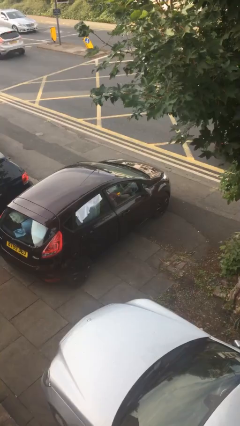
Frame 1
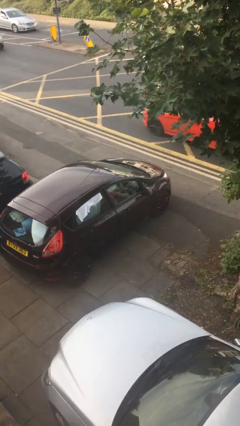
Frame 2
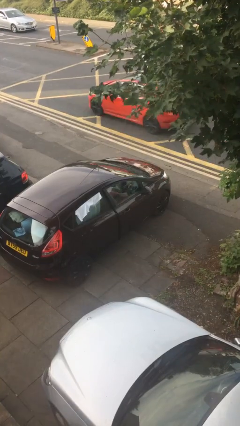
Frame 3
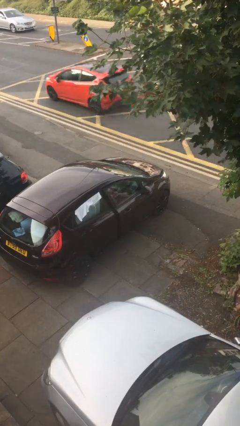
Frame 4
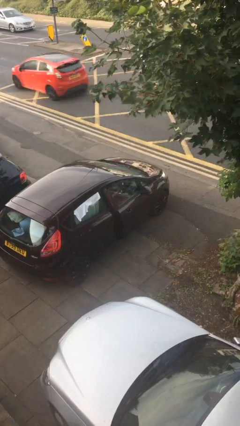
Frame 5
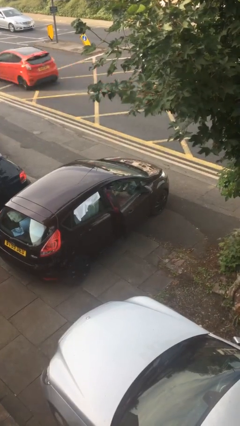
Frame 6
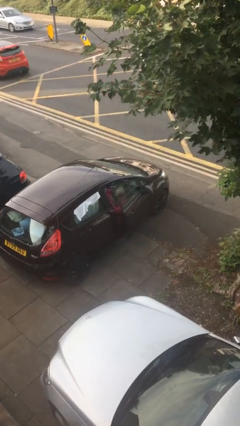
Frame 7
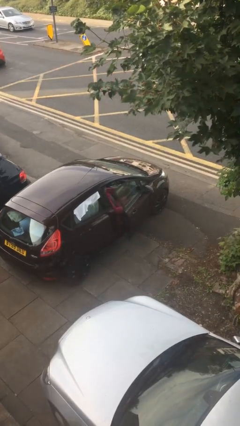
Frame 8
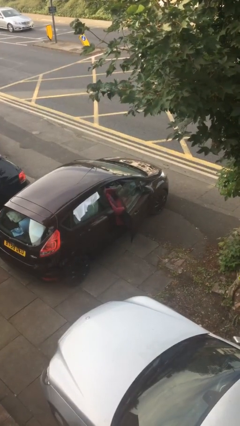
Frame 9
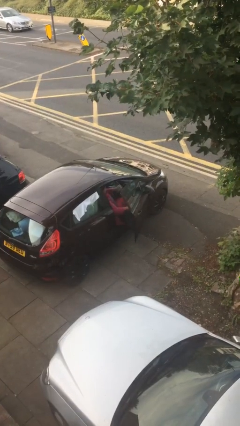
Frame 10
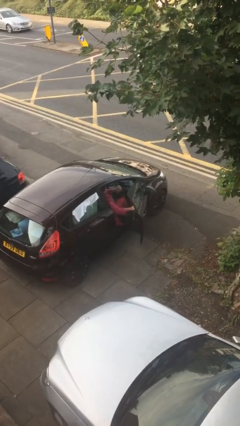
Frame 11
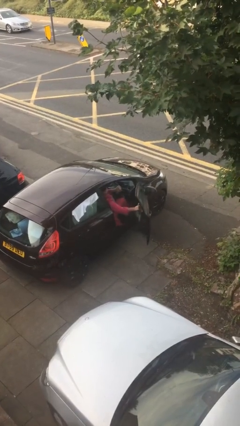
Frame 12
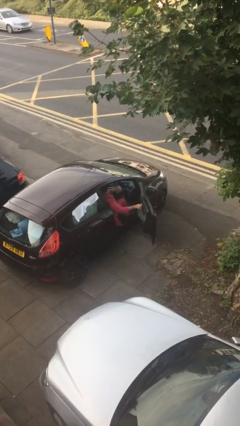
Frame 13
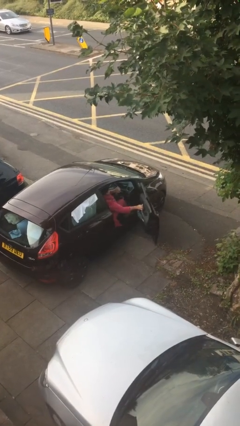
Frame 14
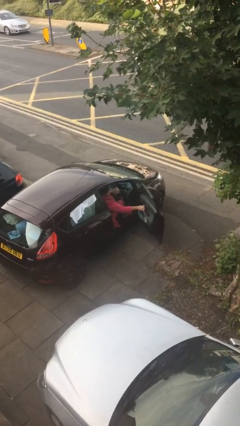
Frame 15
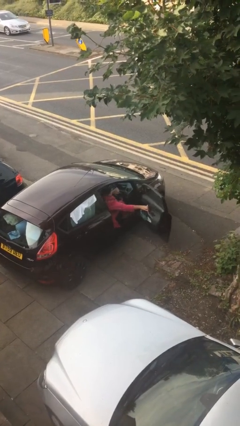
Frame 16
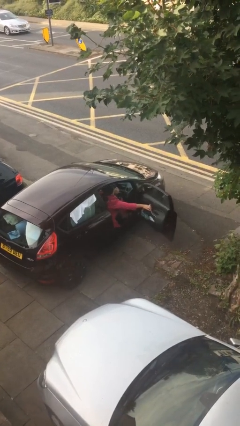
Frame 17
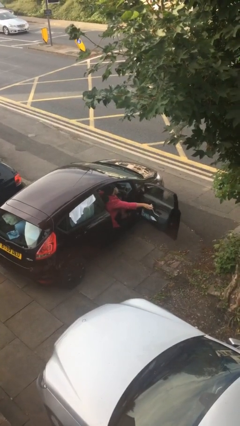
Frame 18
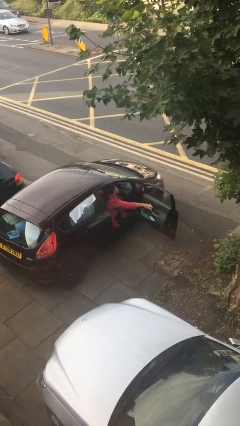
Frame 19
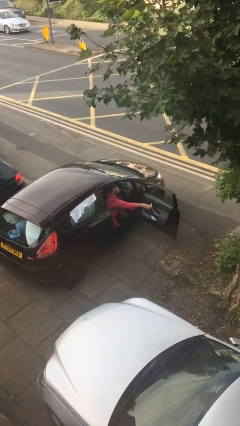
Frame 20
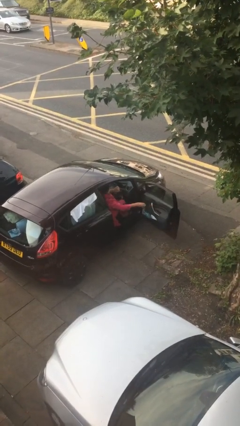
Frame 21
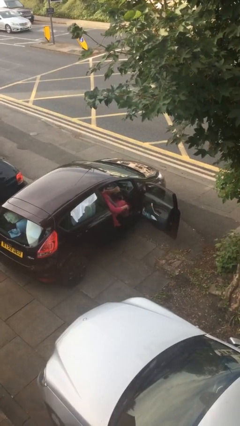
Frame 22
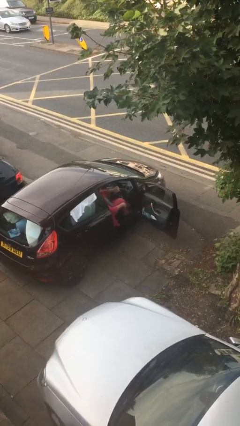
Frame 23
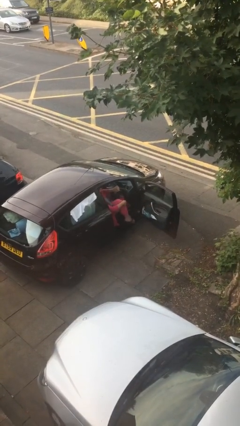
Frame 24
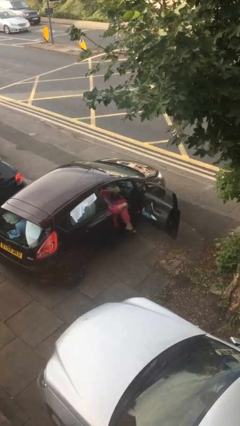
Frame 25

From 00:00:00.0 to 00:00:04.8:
person opens car door

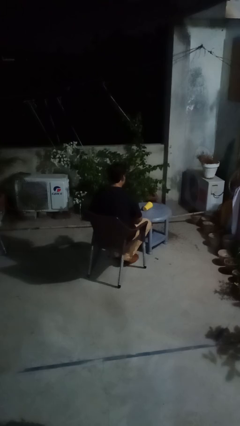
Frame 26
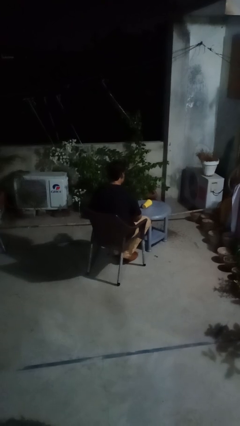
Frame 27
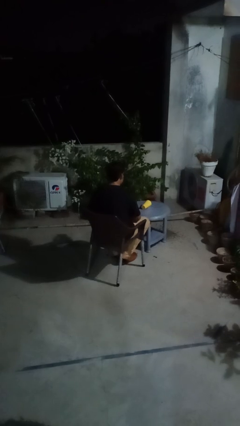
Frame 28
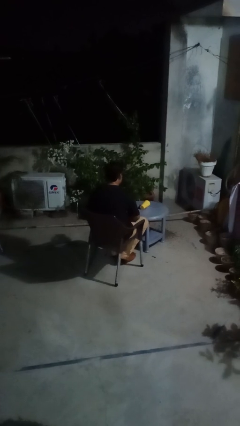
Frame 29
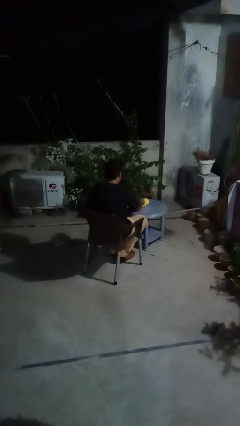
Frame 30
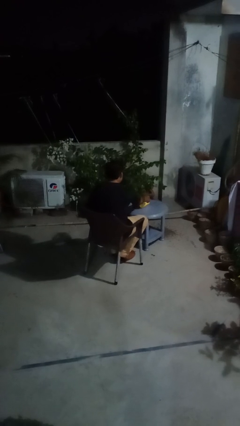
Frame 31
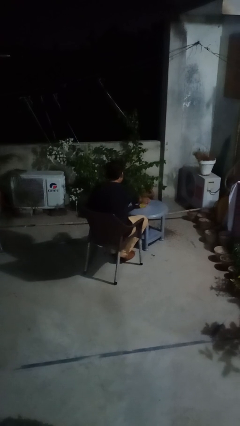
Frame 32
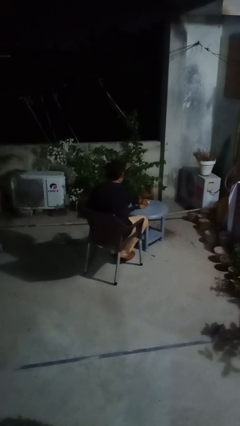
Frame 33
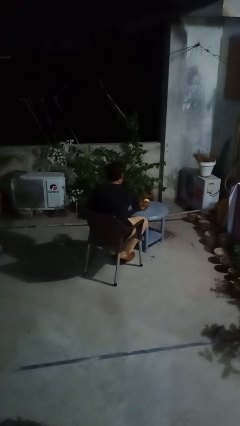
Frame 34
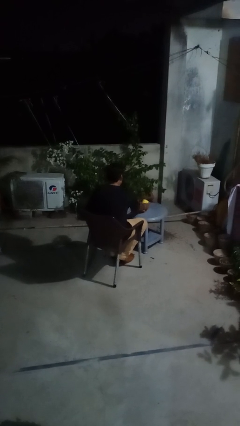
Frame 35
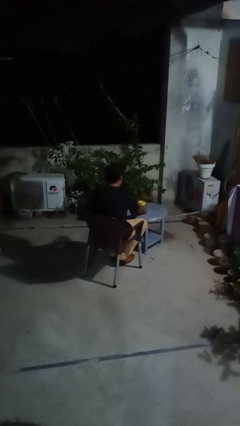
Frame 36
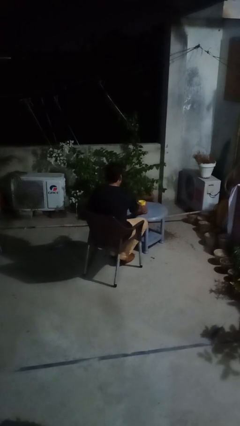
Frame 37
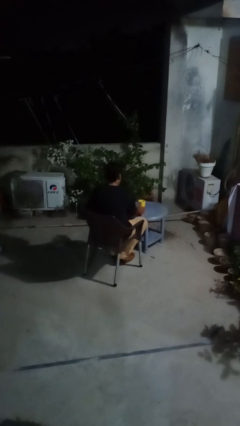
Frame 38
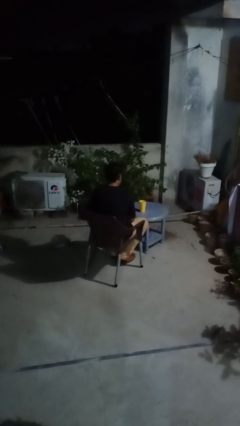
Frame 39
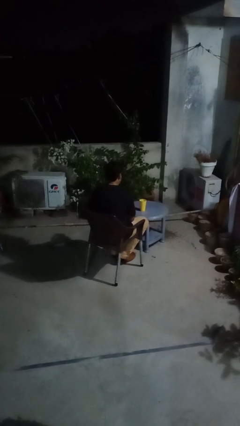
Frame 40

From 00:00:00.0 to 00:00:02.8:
person sets upright glass

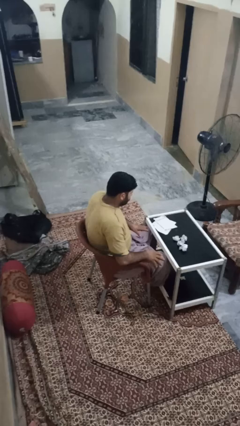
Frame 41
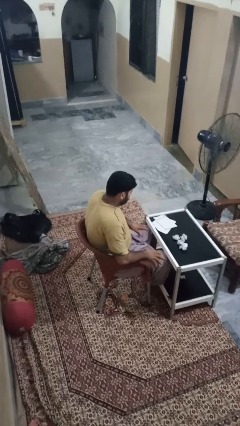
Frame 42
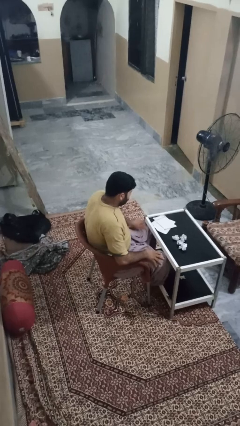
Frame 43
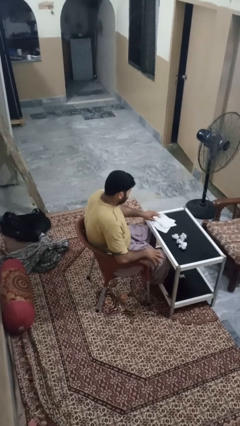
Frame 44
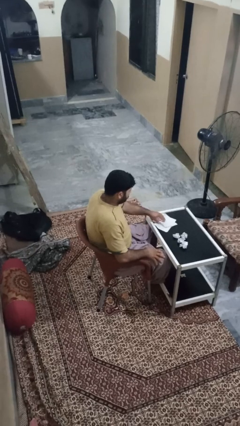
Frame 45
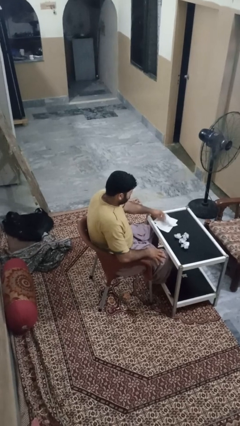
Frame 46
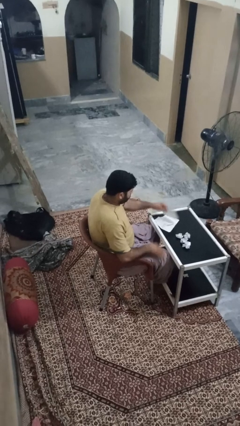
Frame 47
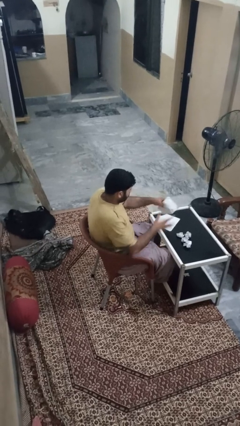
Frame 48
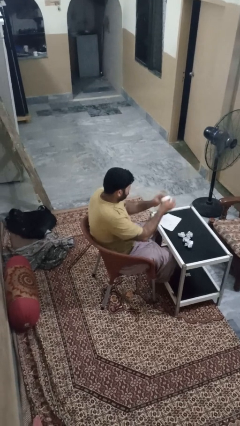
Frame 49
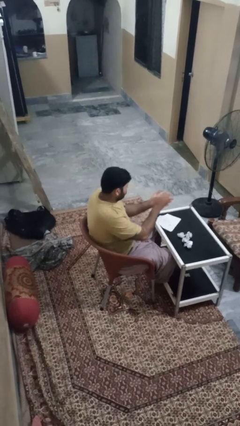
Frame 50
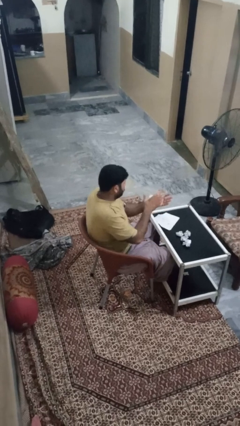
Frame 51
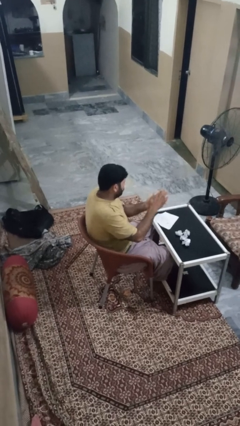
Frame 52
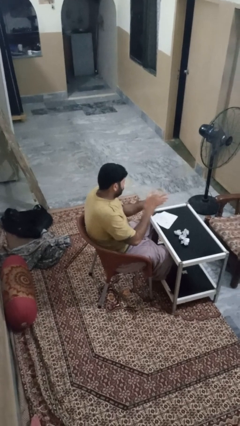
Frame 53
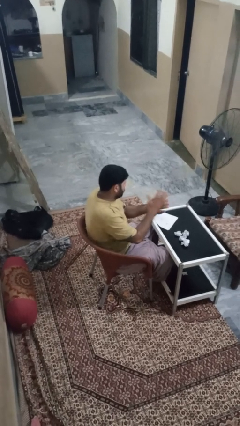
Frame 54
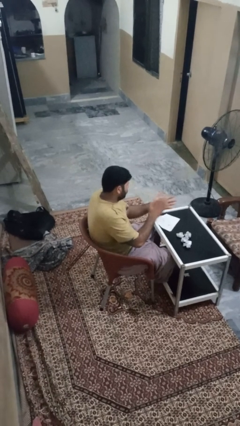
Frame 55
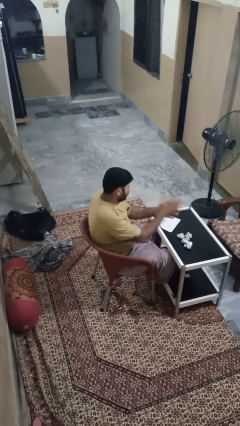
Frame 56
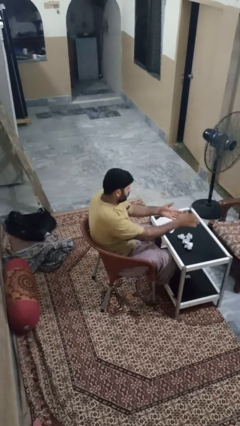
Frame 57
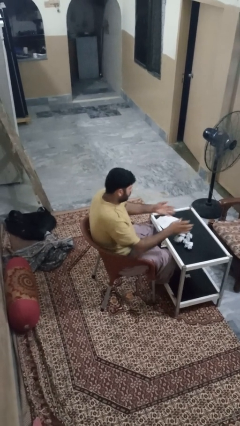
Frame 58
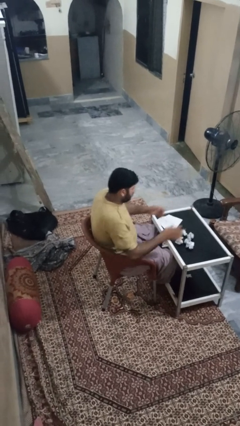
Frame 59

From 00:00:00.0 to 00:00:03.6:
person crumples paper

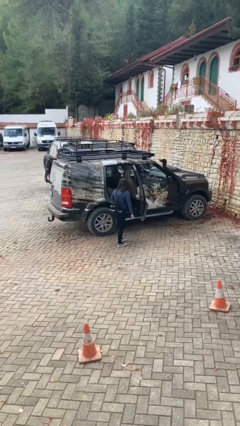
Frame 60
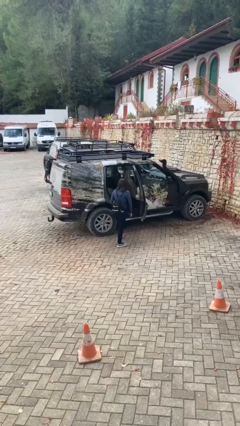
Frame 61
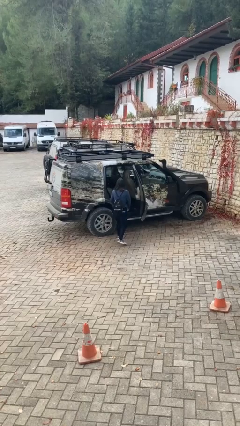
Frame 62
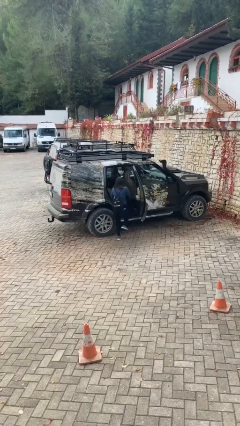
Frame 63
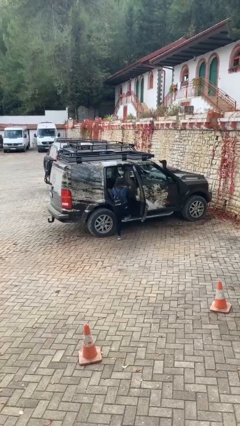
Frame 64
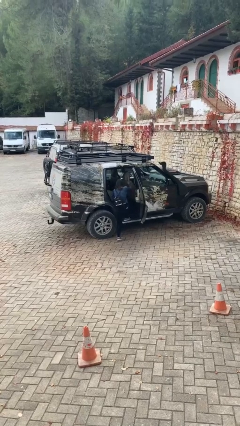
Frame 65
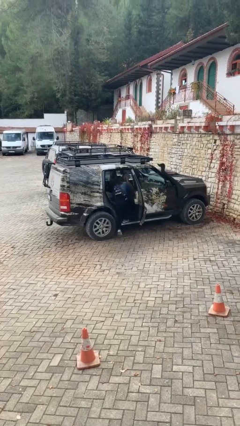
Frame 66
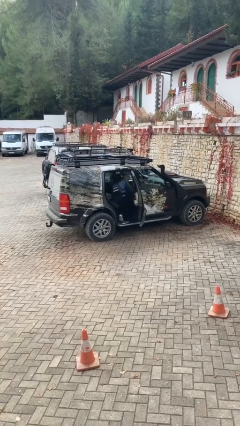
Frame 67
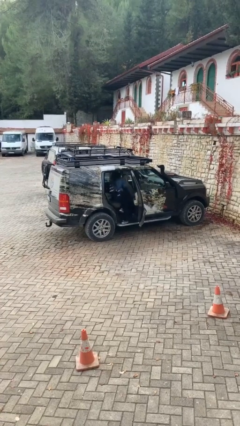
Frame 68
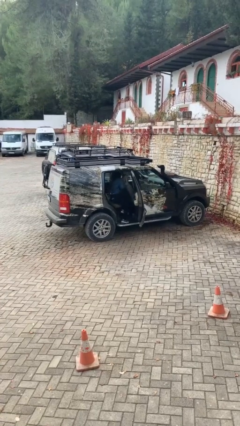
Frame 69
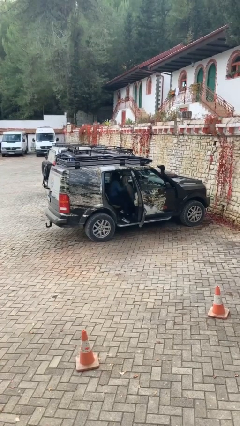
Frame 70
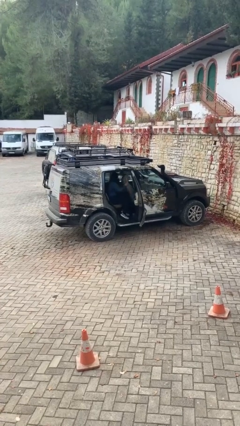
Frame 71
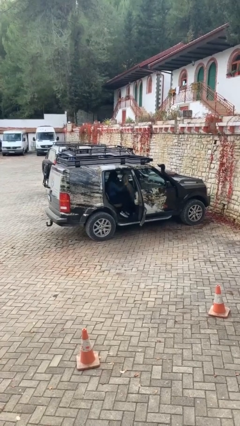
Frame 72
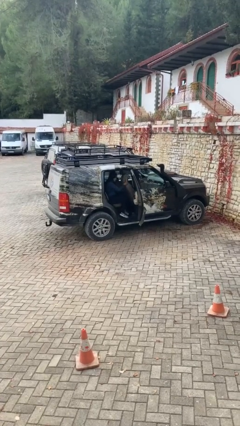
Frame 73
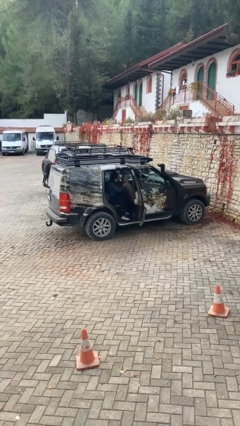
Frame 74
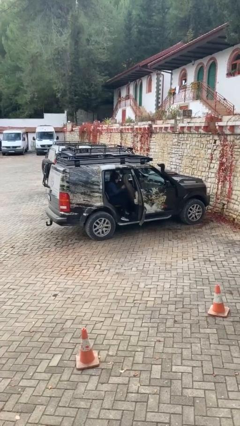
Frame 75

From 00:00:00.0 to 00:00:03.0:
person enters car

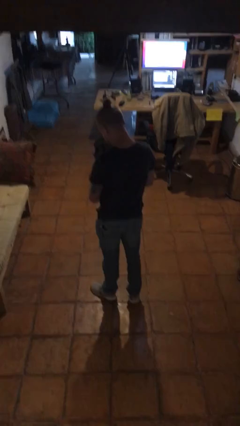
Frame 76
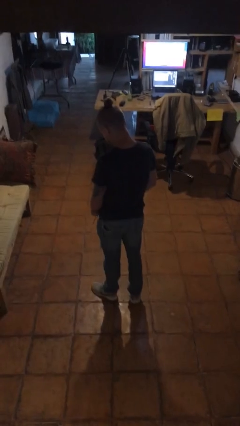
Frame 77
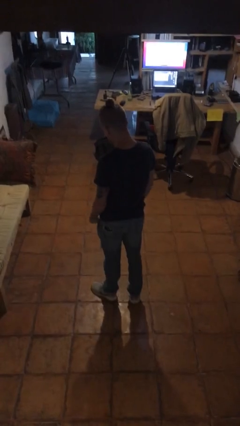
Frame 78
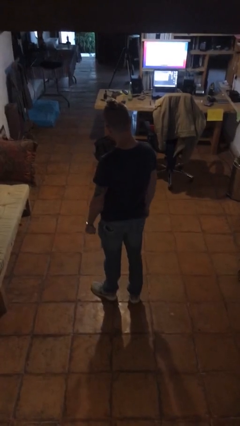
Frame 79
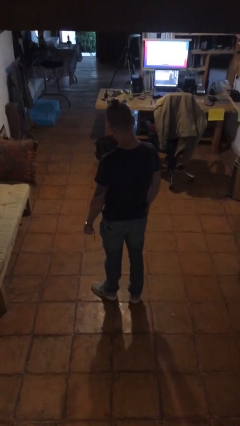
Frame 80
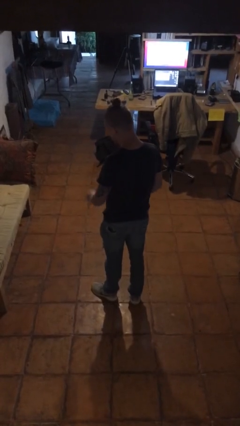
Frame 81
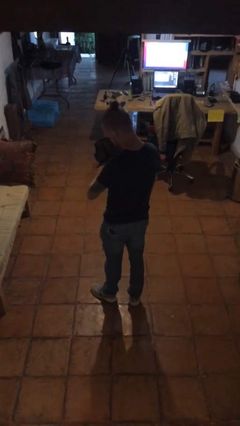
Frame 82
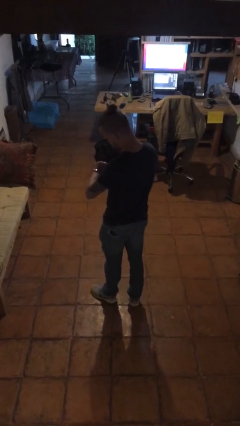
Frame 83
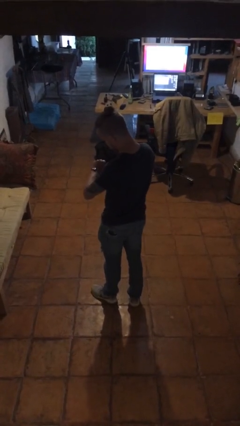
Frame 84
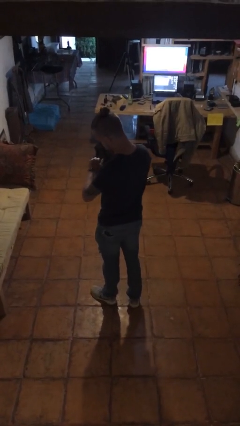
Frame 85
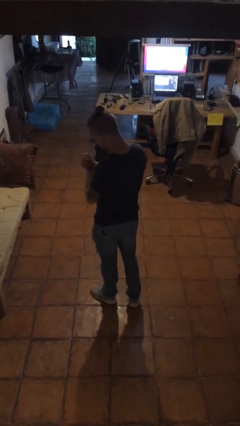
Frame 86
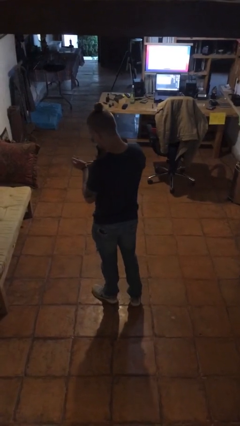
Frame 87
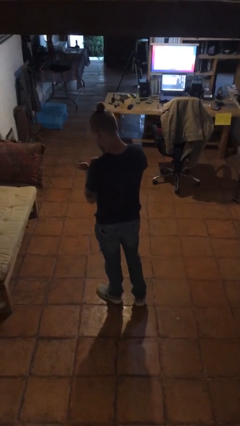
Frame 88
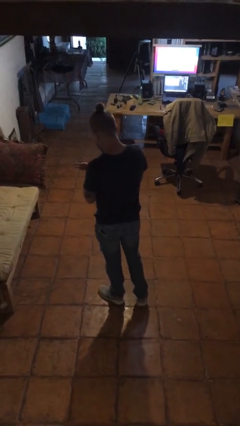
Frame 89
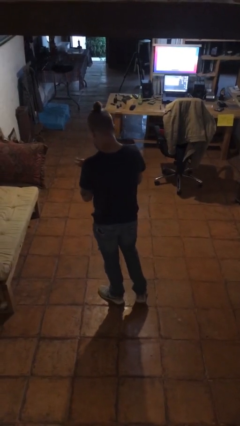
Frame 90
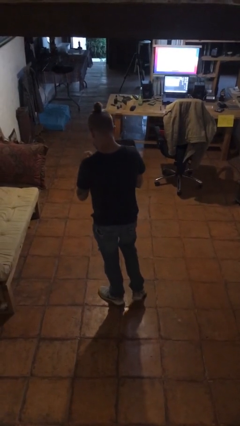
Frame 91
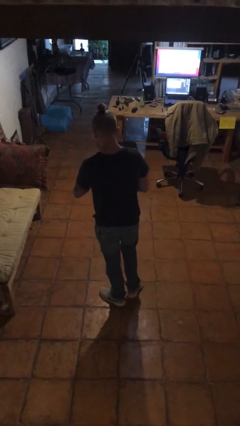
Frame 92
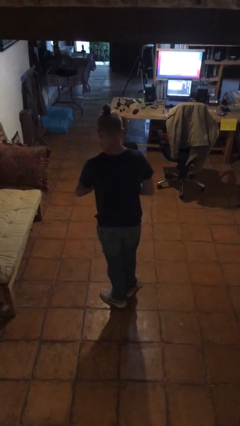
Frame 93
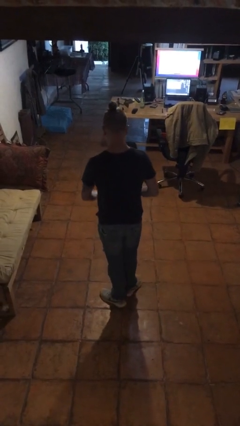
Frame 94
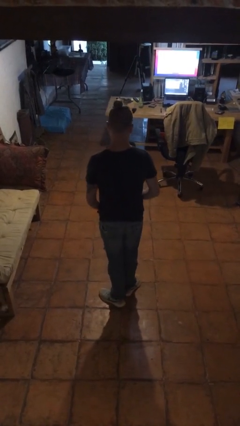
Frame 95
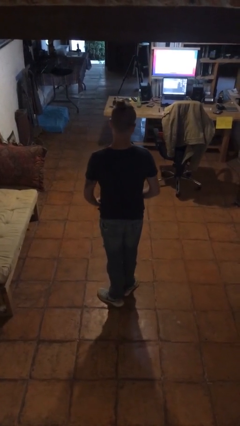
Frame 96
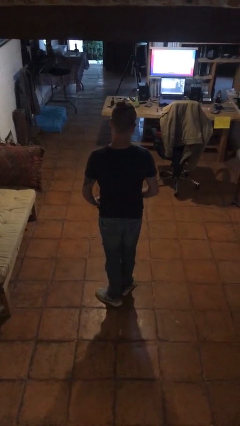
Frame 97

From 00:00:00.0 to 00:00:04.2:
person takes off wristwatch
